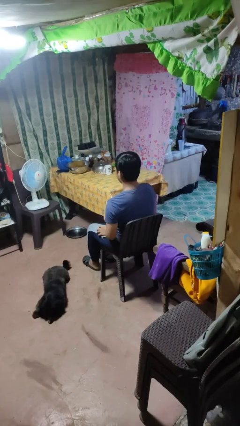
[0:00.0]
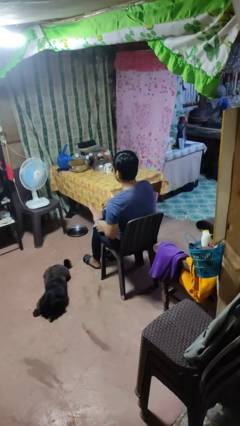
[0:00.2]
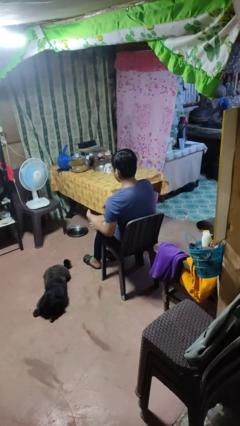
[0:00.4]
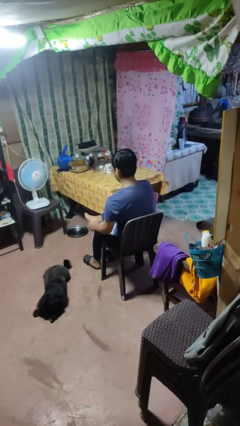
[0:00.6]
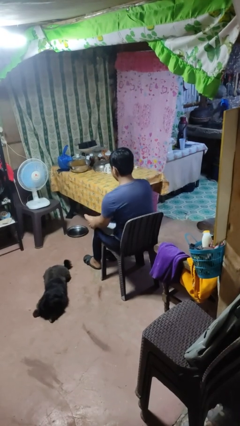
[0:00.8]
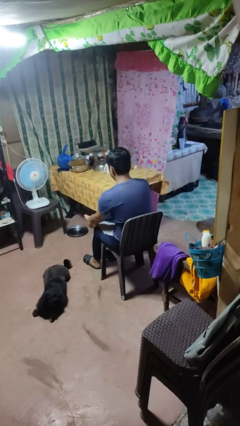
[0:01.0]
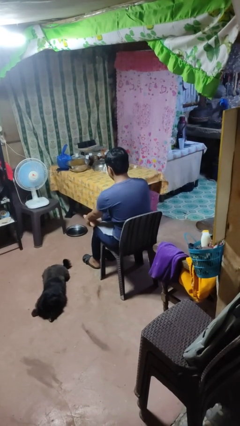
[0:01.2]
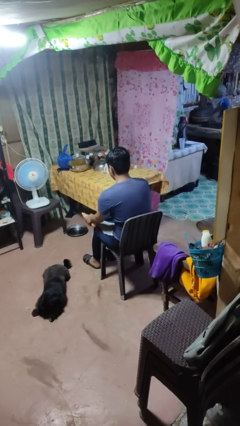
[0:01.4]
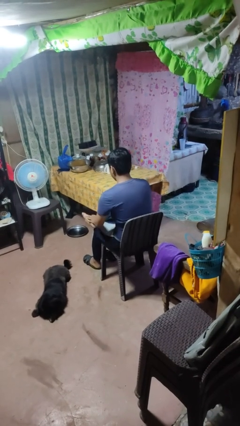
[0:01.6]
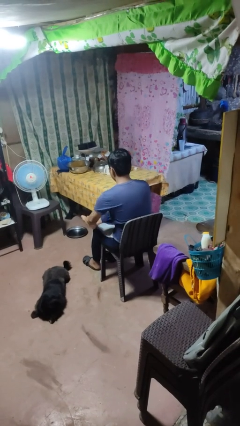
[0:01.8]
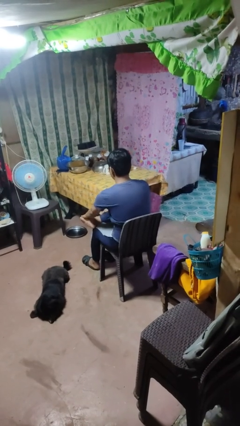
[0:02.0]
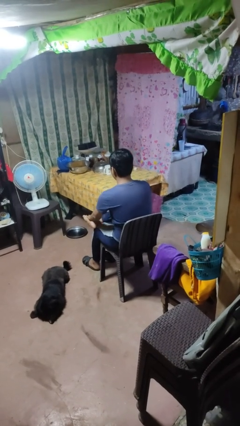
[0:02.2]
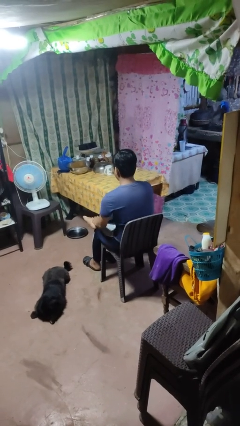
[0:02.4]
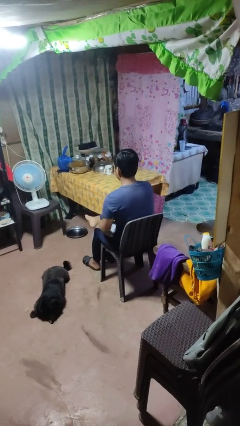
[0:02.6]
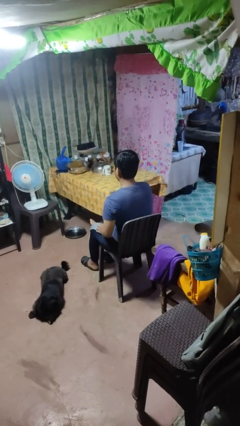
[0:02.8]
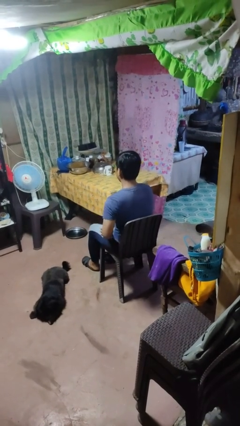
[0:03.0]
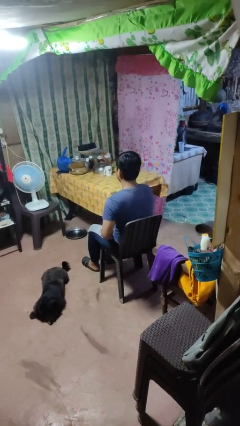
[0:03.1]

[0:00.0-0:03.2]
person rubs foot

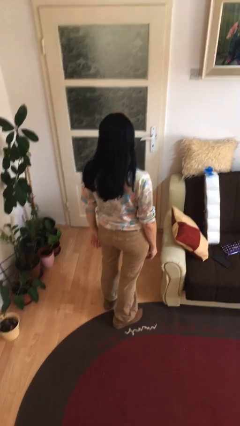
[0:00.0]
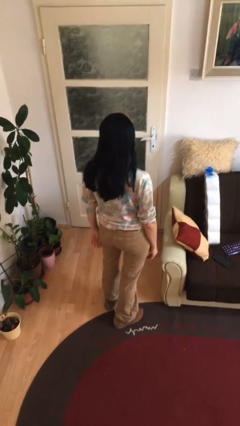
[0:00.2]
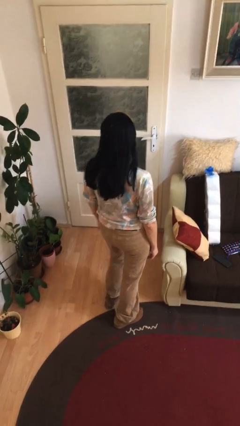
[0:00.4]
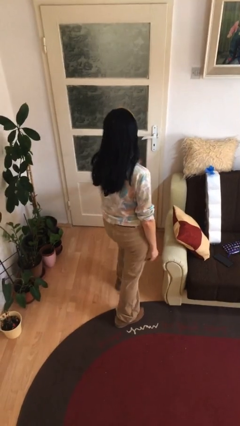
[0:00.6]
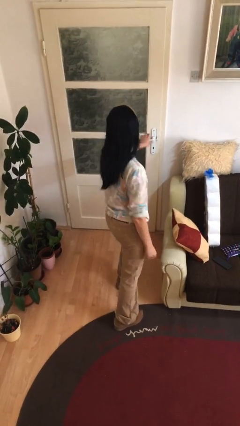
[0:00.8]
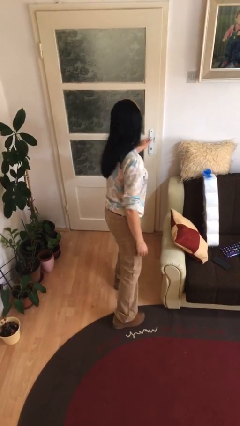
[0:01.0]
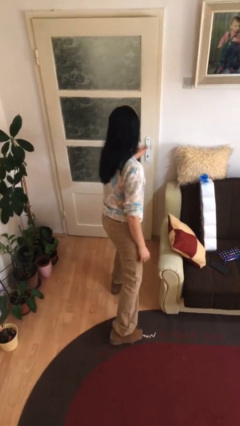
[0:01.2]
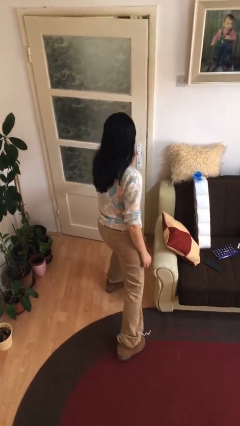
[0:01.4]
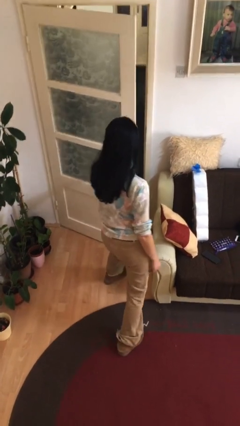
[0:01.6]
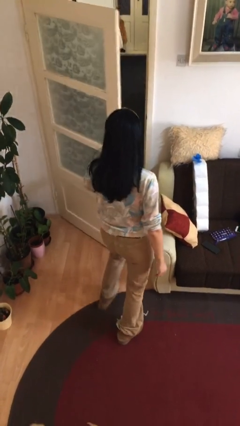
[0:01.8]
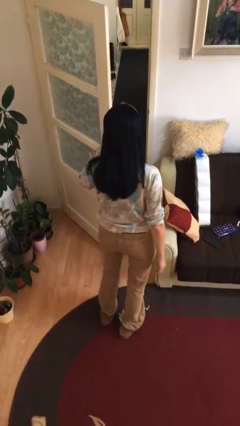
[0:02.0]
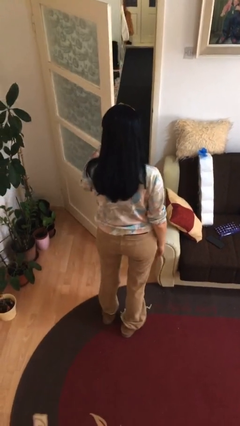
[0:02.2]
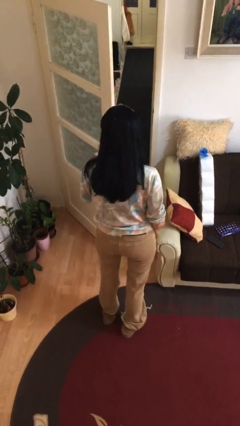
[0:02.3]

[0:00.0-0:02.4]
person opens facility door

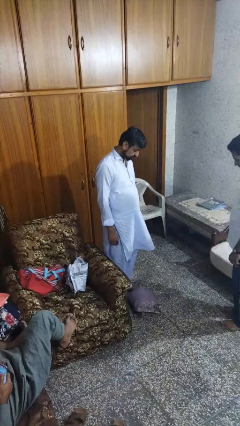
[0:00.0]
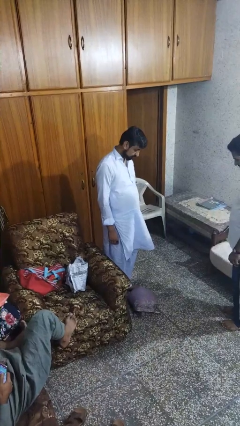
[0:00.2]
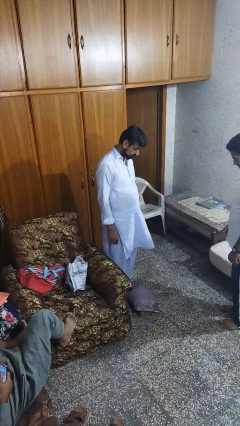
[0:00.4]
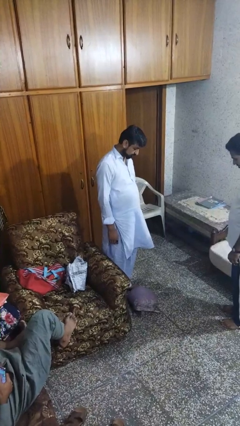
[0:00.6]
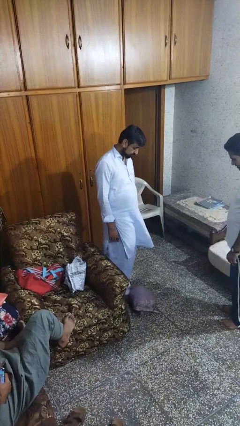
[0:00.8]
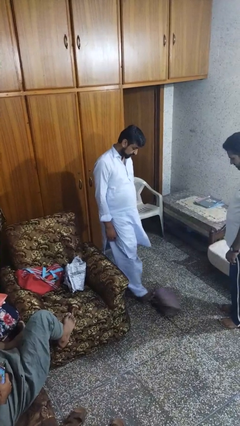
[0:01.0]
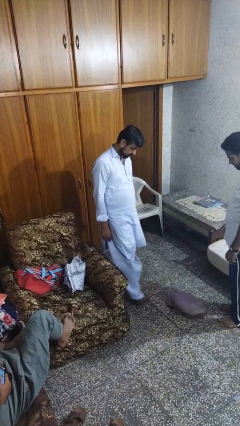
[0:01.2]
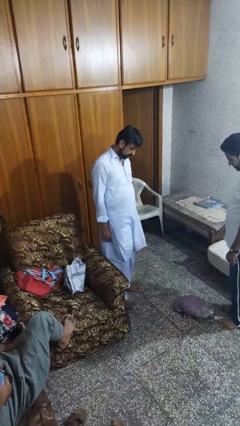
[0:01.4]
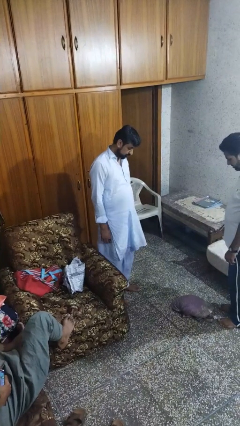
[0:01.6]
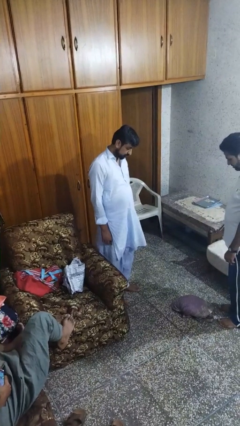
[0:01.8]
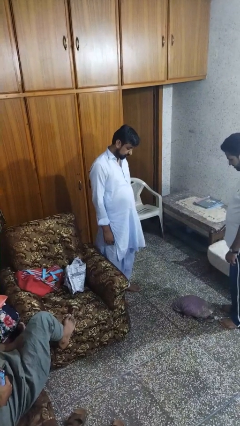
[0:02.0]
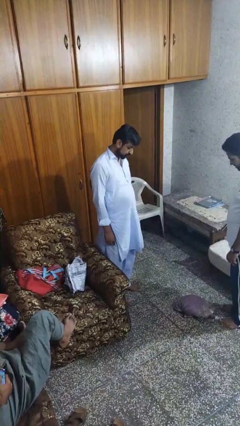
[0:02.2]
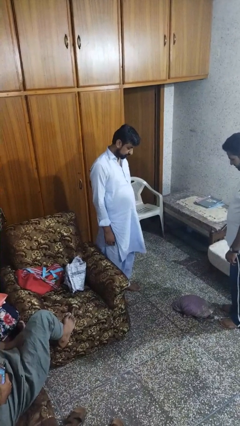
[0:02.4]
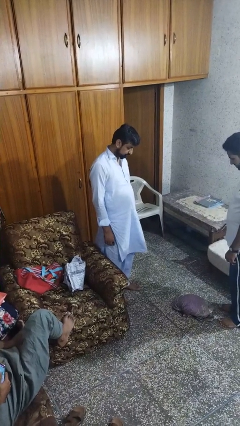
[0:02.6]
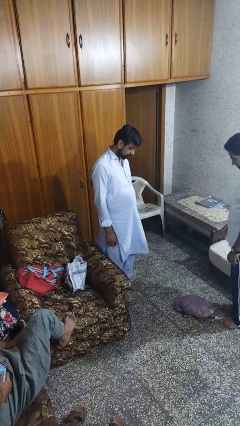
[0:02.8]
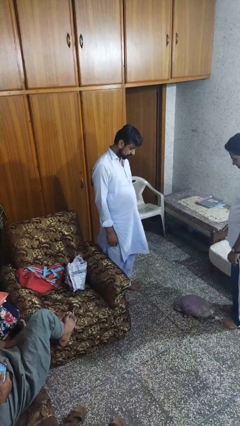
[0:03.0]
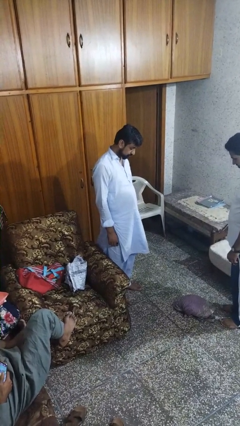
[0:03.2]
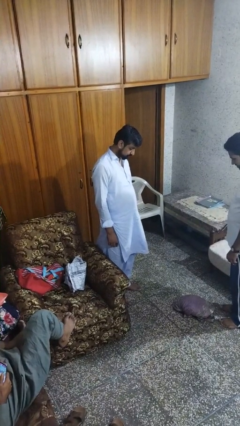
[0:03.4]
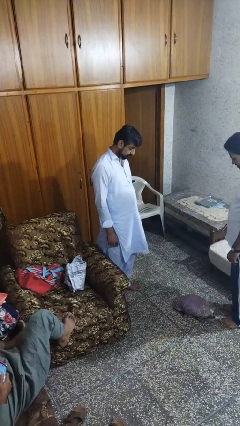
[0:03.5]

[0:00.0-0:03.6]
person kicks object to person

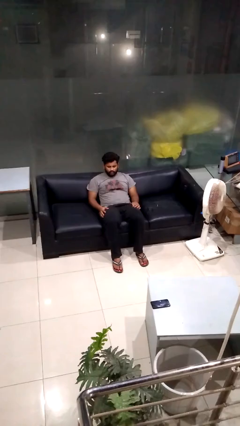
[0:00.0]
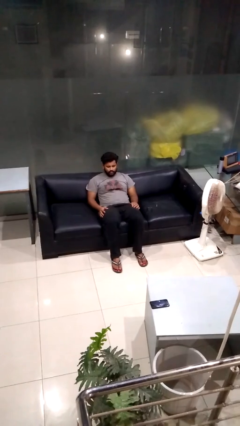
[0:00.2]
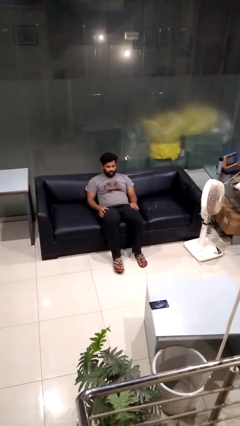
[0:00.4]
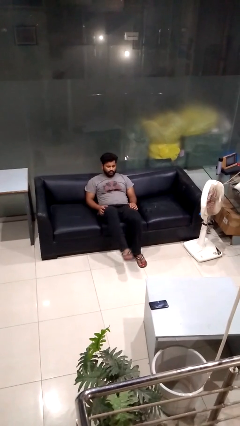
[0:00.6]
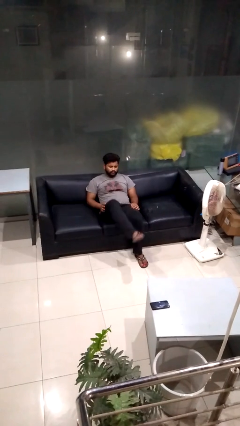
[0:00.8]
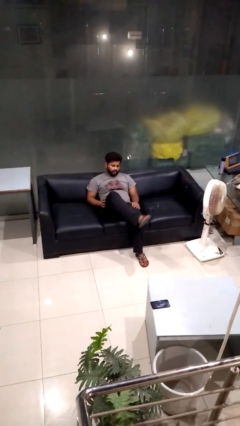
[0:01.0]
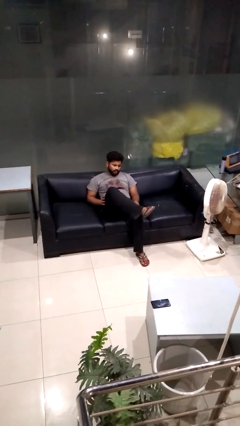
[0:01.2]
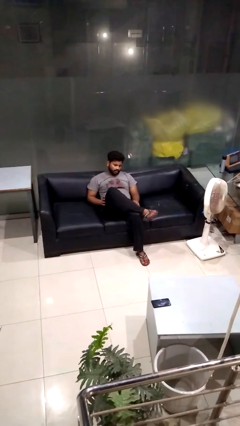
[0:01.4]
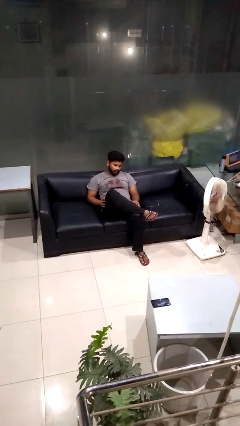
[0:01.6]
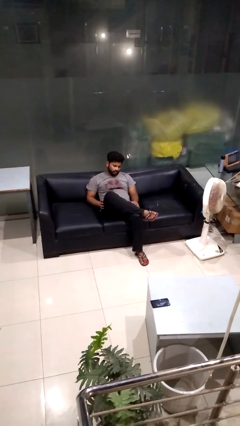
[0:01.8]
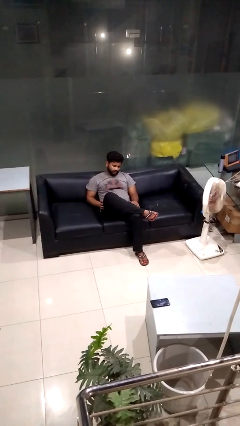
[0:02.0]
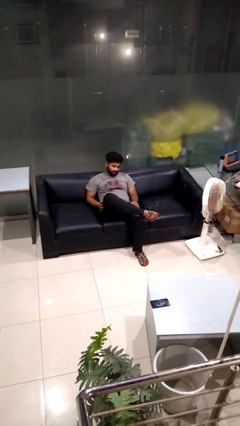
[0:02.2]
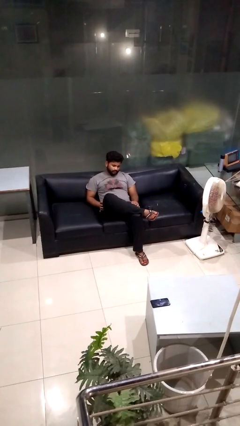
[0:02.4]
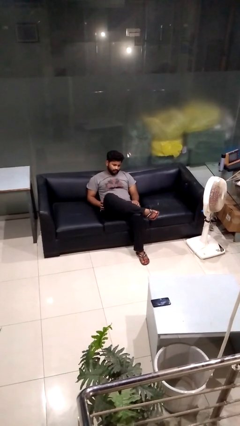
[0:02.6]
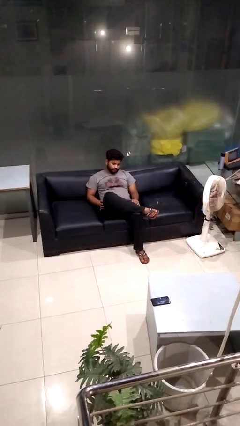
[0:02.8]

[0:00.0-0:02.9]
person crosses legs

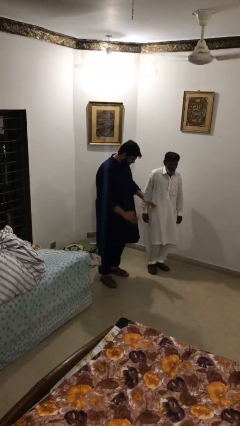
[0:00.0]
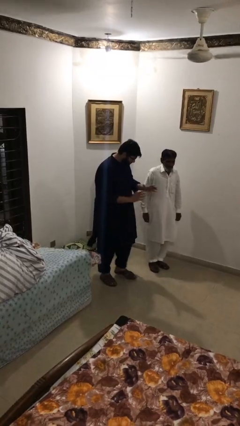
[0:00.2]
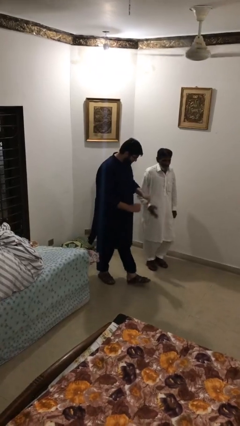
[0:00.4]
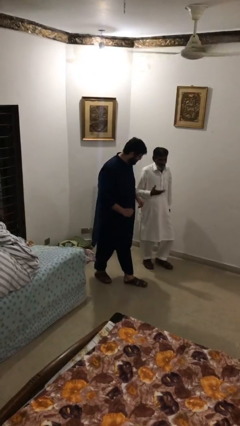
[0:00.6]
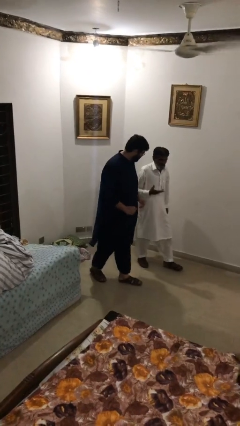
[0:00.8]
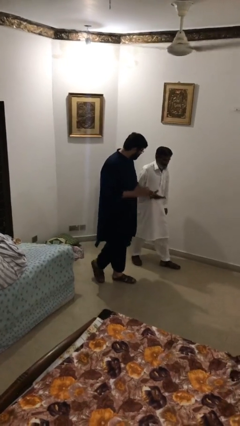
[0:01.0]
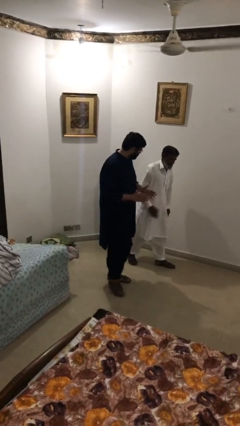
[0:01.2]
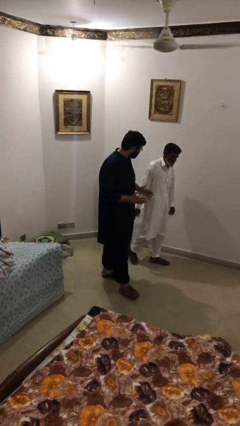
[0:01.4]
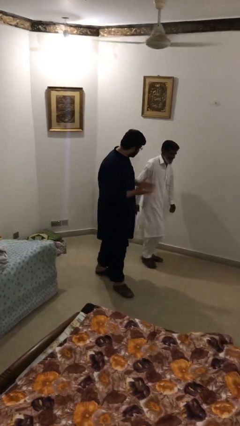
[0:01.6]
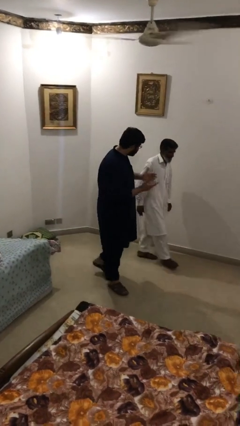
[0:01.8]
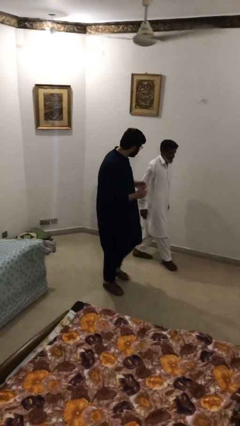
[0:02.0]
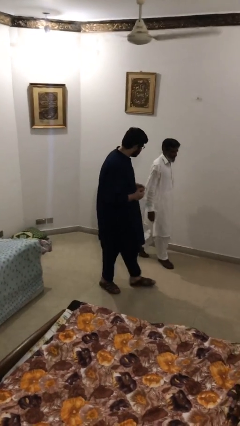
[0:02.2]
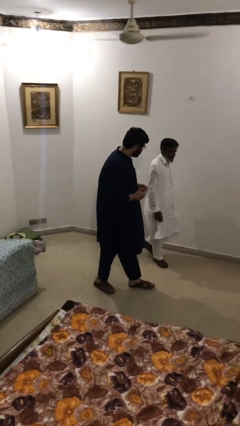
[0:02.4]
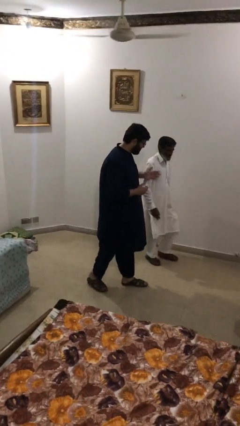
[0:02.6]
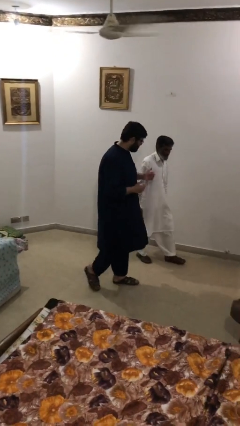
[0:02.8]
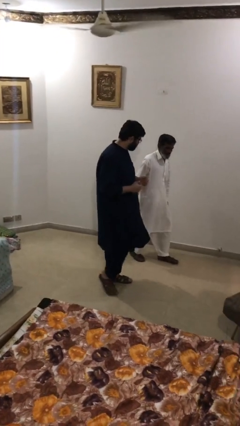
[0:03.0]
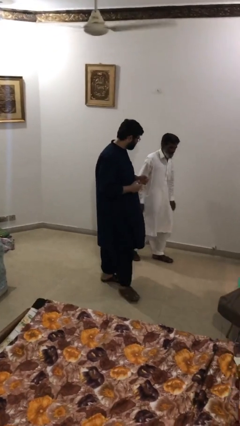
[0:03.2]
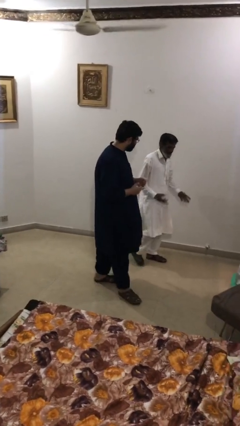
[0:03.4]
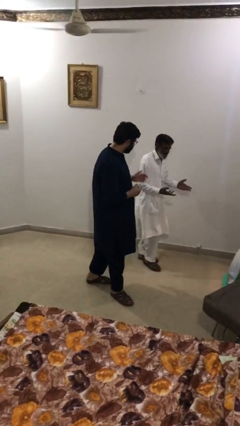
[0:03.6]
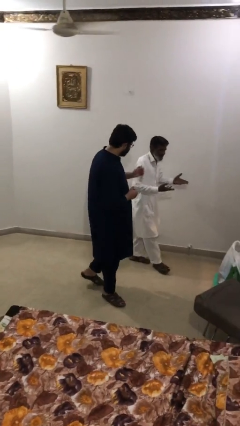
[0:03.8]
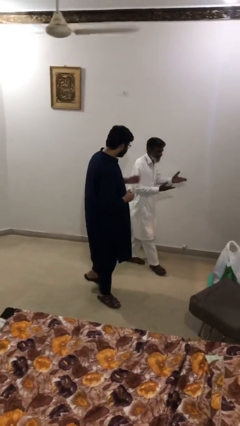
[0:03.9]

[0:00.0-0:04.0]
person talks to person

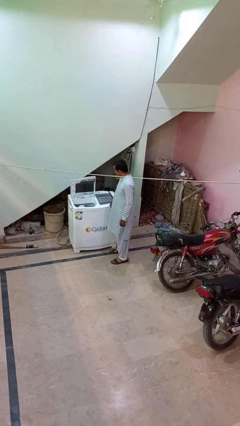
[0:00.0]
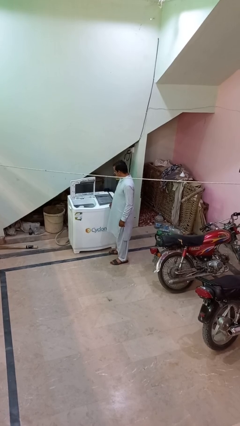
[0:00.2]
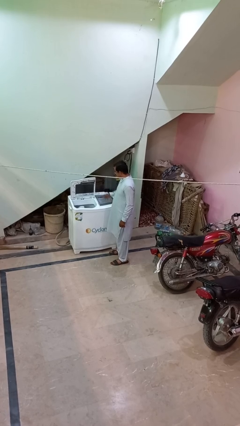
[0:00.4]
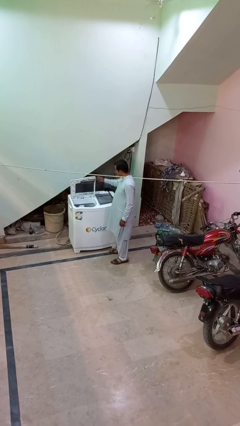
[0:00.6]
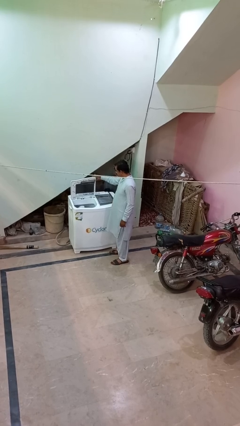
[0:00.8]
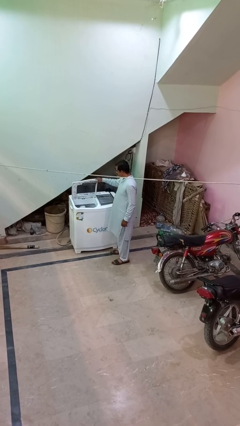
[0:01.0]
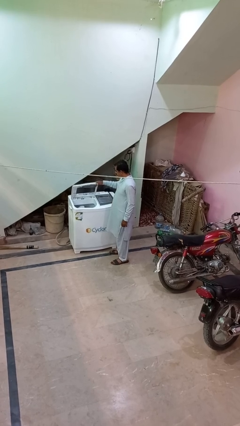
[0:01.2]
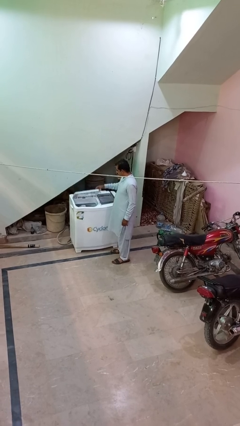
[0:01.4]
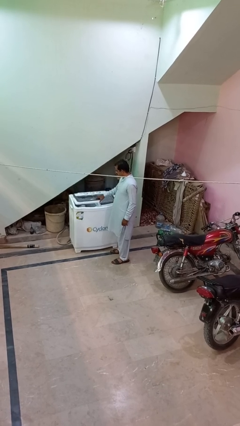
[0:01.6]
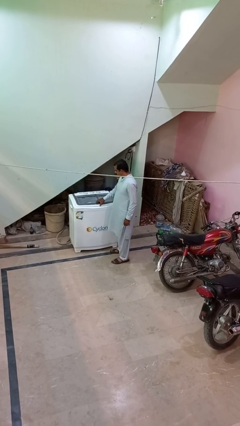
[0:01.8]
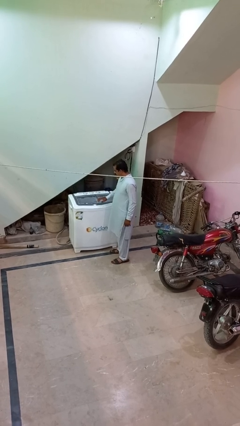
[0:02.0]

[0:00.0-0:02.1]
person closes clothes washer
